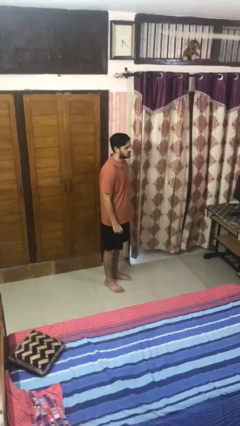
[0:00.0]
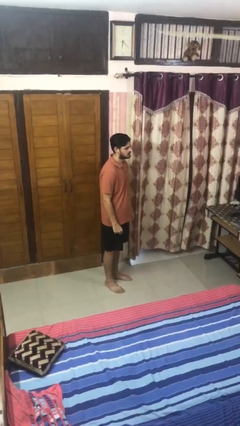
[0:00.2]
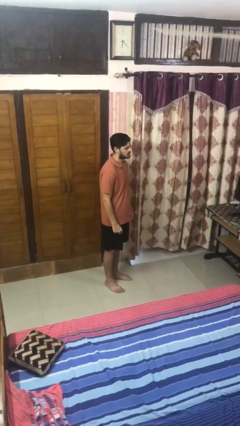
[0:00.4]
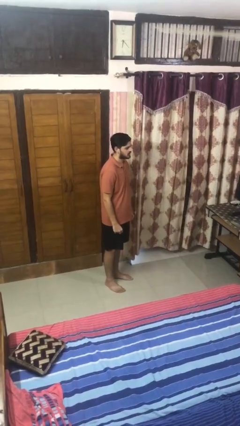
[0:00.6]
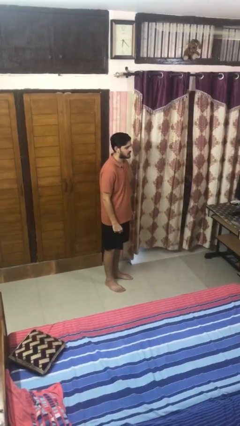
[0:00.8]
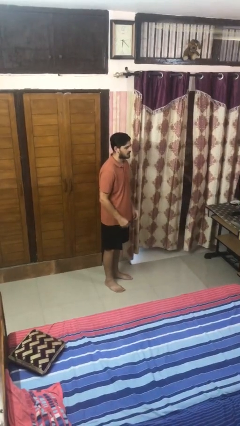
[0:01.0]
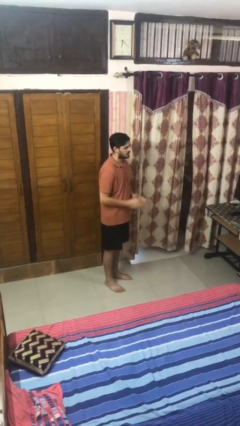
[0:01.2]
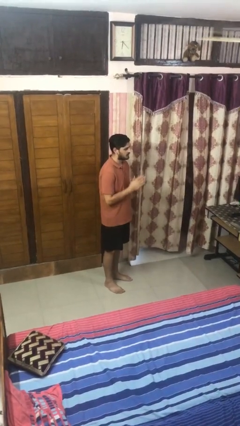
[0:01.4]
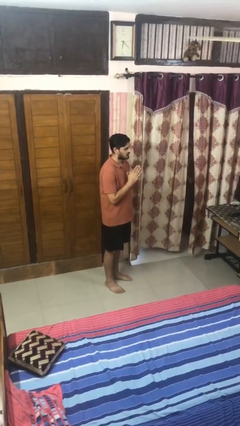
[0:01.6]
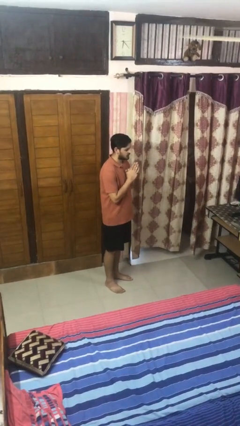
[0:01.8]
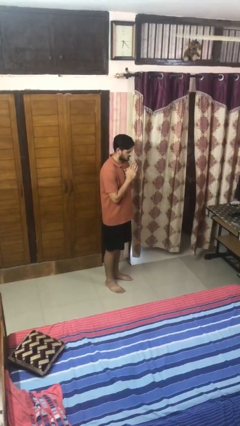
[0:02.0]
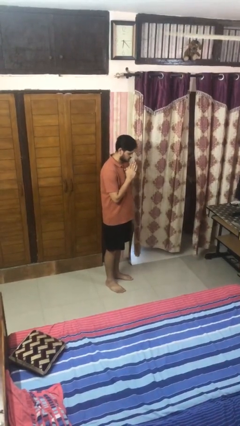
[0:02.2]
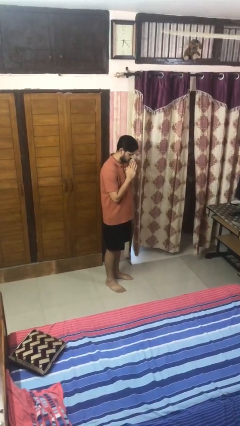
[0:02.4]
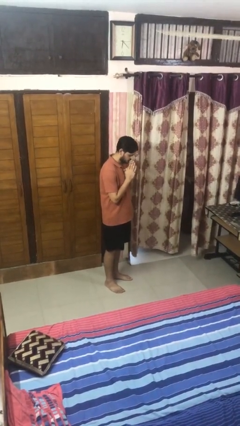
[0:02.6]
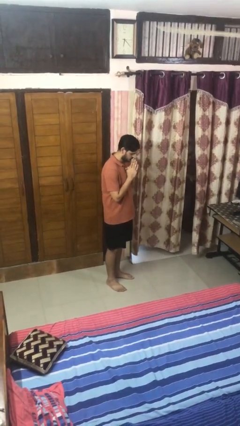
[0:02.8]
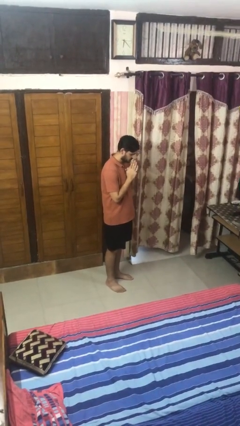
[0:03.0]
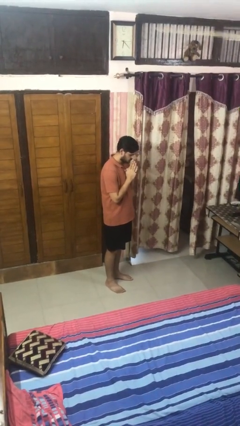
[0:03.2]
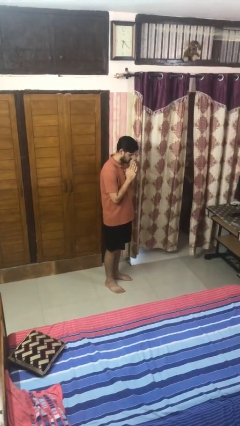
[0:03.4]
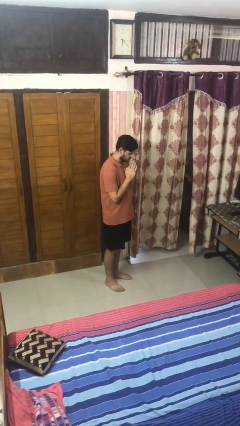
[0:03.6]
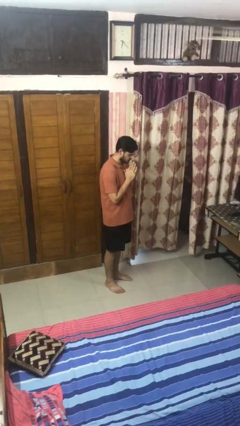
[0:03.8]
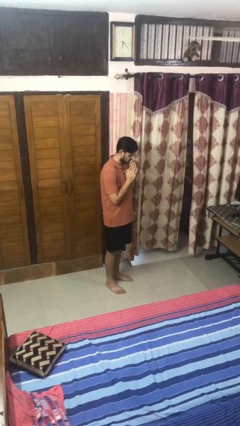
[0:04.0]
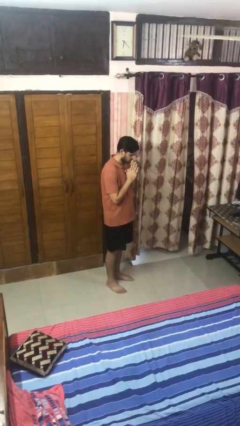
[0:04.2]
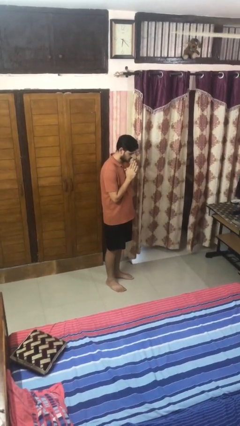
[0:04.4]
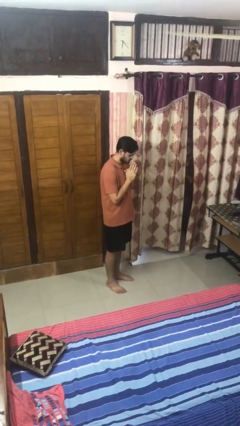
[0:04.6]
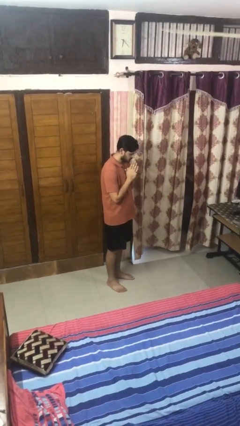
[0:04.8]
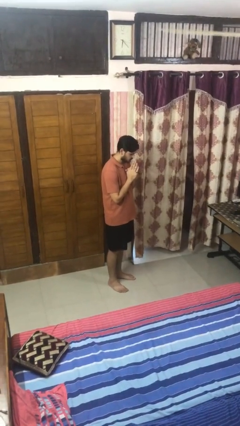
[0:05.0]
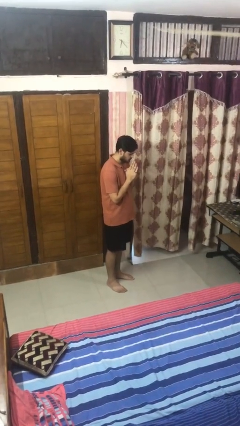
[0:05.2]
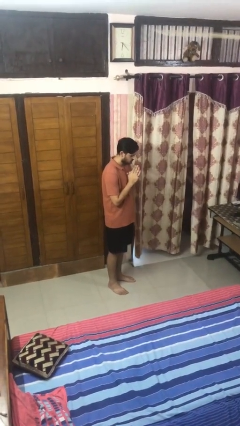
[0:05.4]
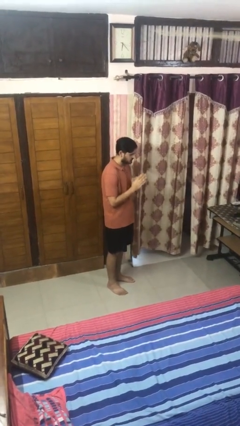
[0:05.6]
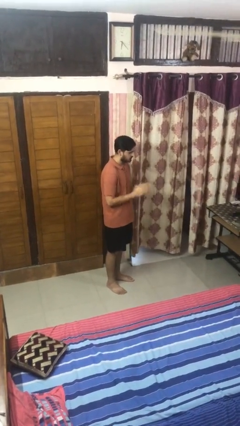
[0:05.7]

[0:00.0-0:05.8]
person prays

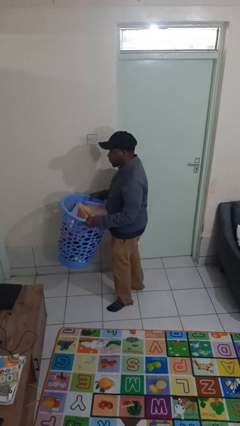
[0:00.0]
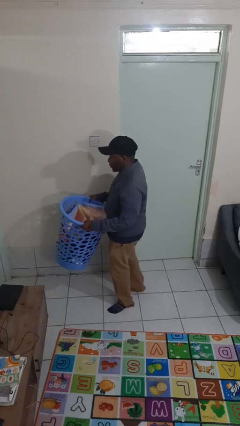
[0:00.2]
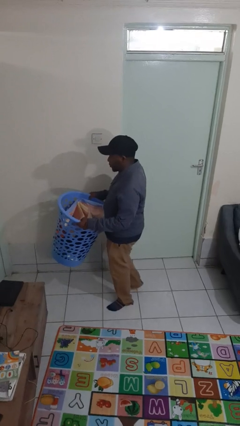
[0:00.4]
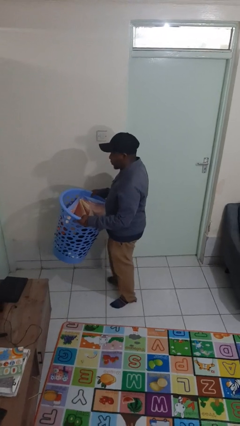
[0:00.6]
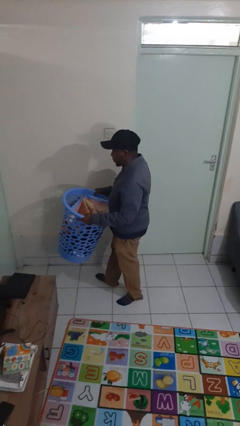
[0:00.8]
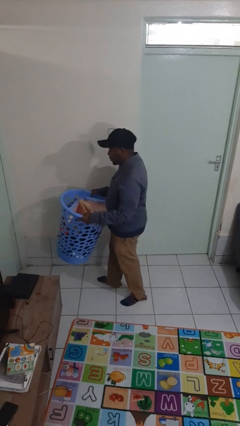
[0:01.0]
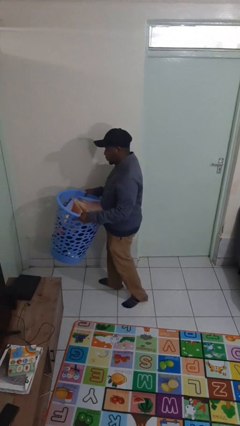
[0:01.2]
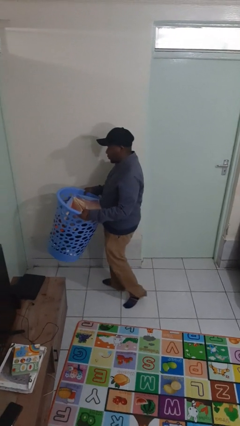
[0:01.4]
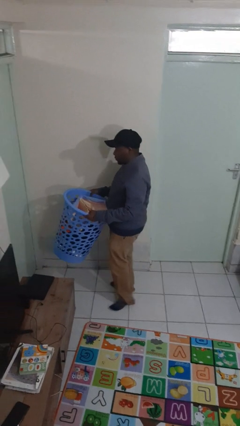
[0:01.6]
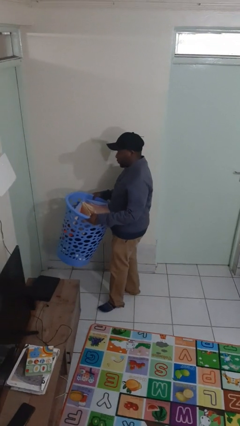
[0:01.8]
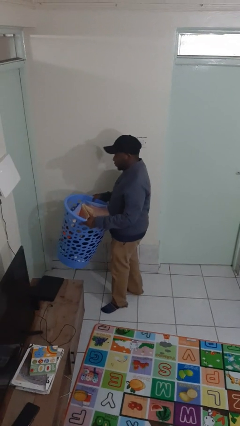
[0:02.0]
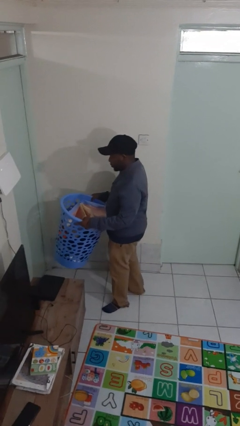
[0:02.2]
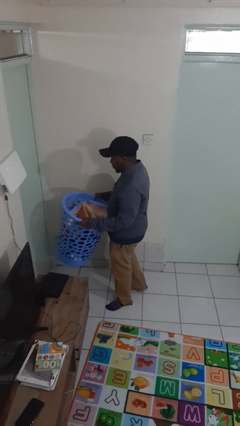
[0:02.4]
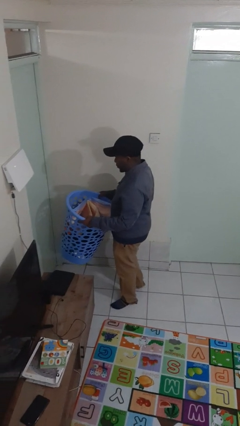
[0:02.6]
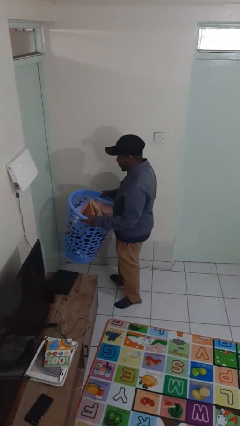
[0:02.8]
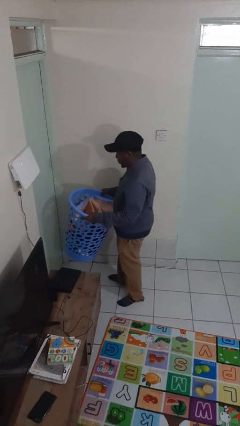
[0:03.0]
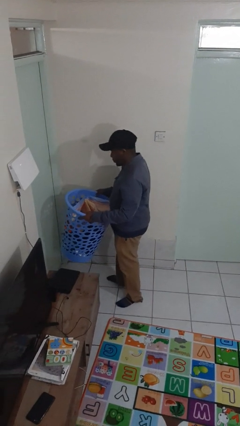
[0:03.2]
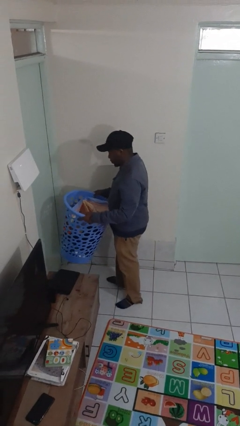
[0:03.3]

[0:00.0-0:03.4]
person carries laundry basket

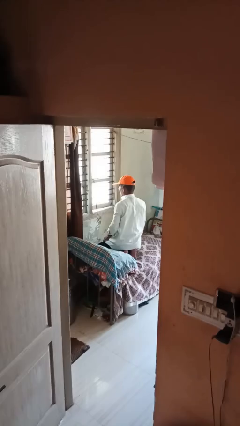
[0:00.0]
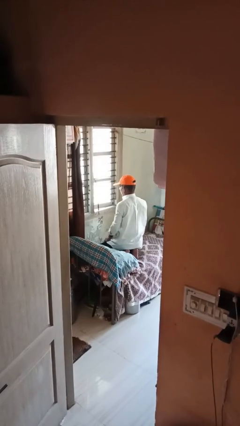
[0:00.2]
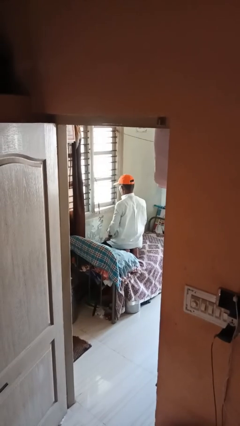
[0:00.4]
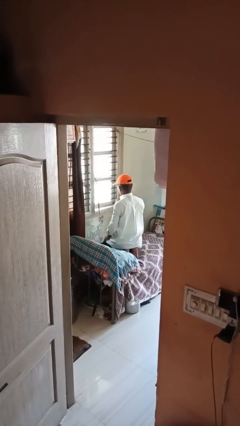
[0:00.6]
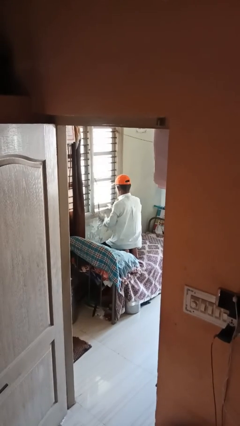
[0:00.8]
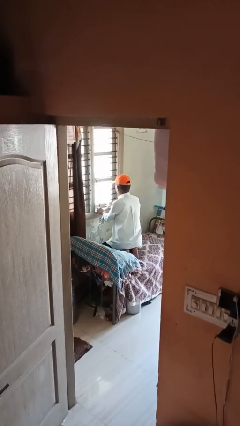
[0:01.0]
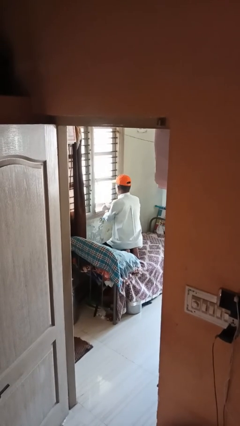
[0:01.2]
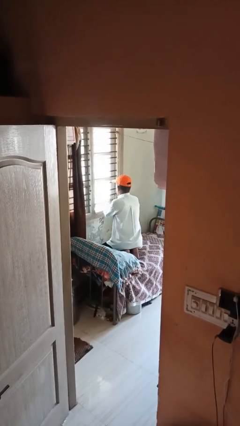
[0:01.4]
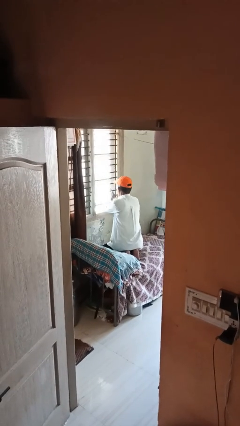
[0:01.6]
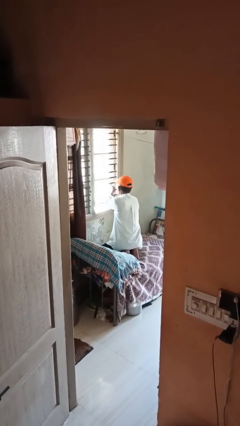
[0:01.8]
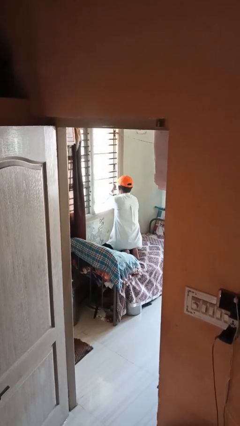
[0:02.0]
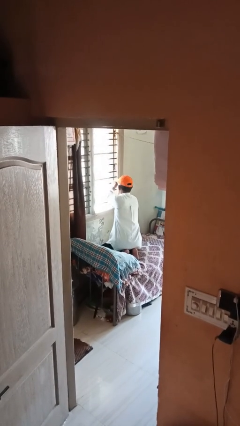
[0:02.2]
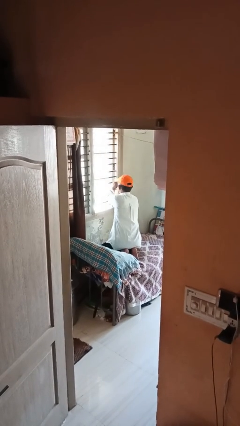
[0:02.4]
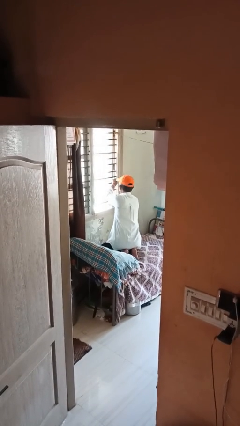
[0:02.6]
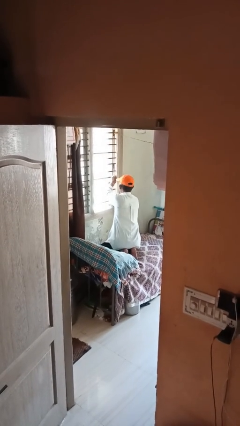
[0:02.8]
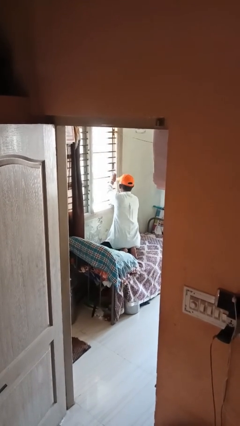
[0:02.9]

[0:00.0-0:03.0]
person opens home window

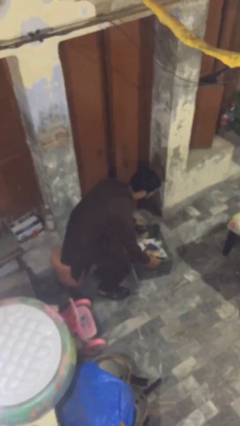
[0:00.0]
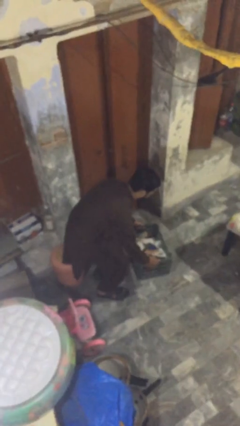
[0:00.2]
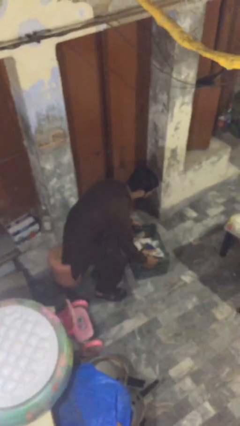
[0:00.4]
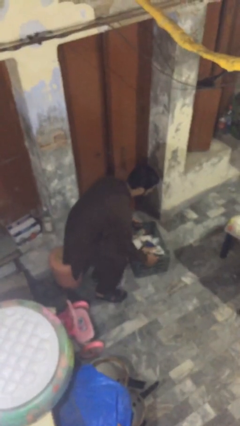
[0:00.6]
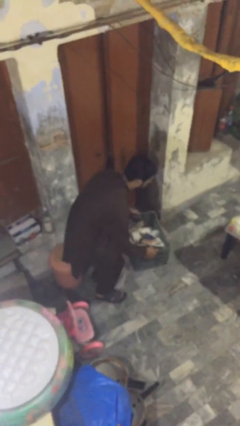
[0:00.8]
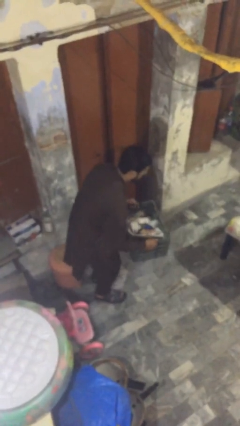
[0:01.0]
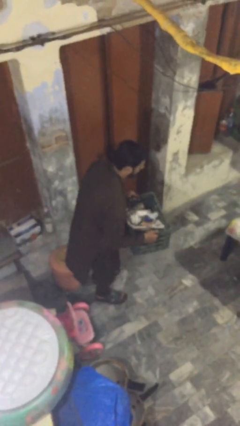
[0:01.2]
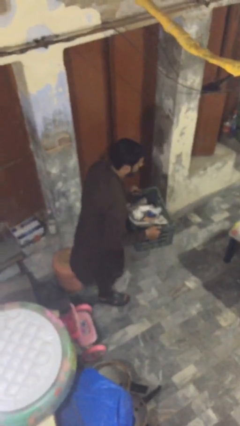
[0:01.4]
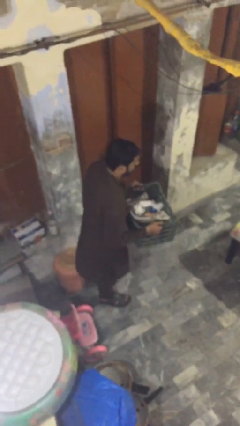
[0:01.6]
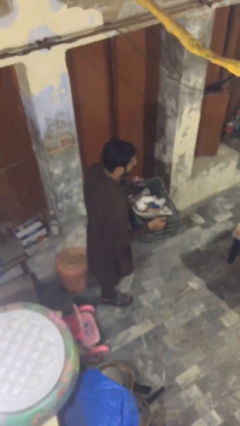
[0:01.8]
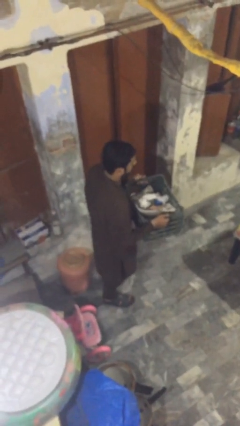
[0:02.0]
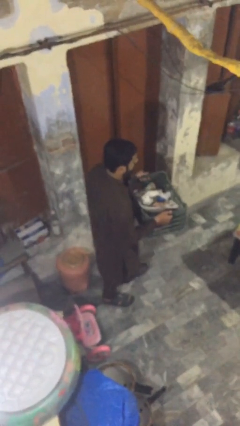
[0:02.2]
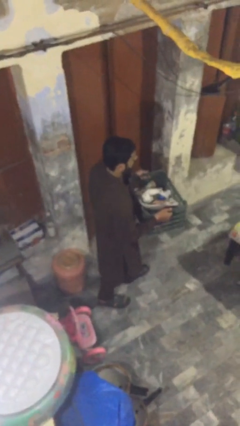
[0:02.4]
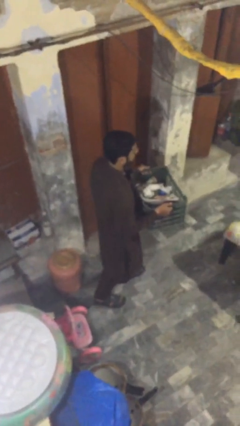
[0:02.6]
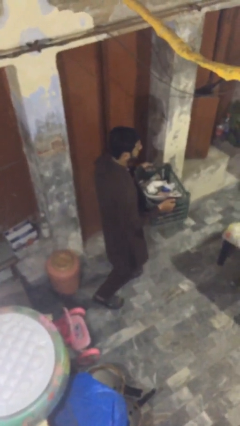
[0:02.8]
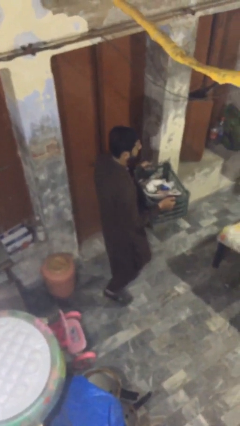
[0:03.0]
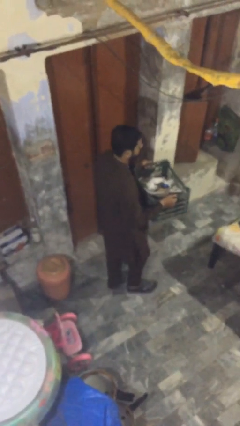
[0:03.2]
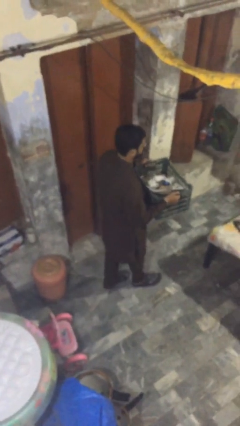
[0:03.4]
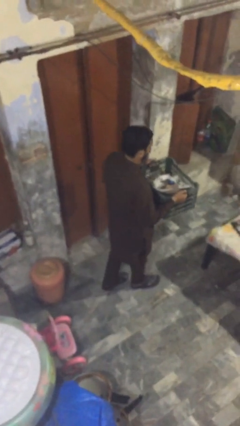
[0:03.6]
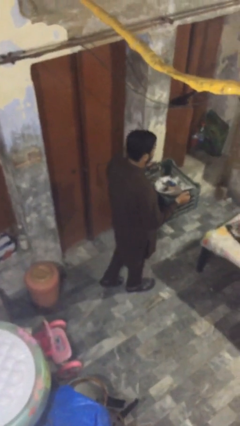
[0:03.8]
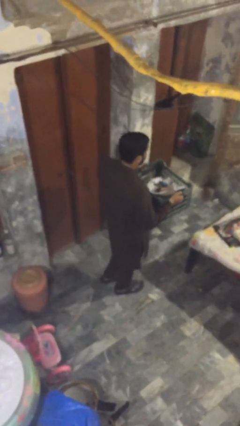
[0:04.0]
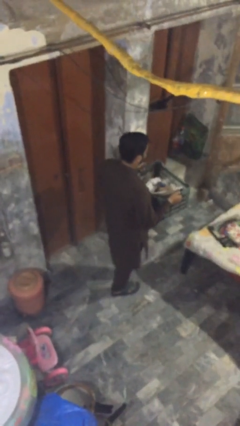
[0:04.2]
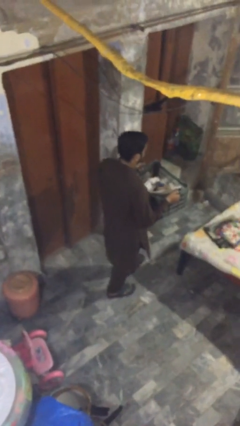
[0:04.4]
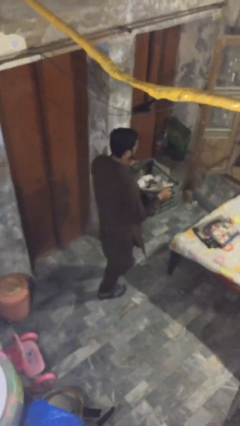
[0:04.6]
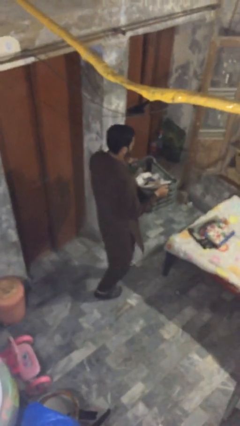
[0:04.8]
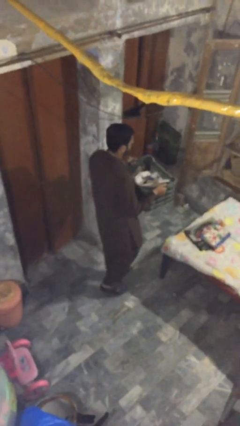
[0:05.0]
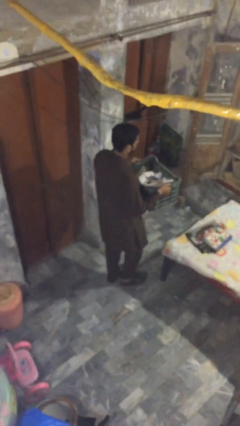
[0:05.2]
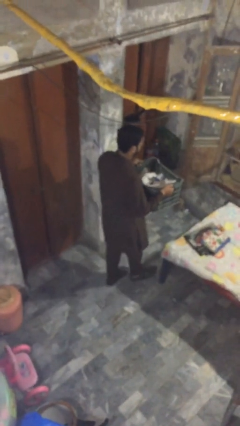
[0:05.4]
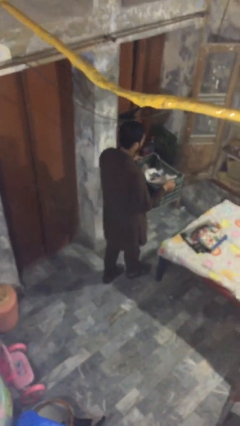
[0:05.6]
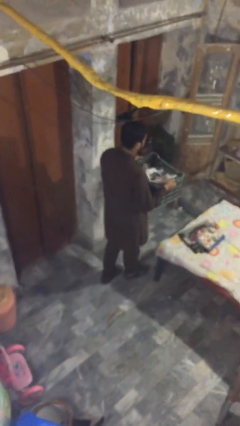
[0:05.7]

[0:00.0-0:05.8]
person carries heavy object
